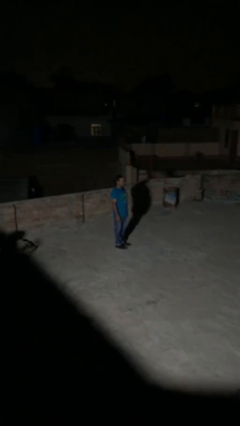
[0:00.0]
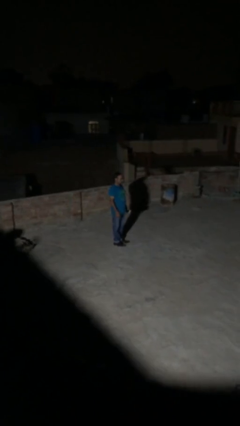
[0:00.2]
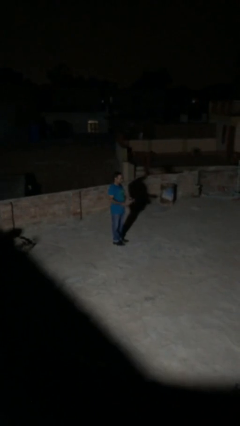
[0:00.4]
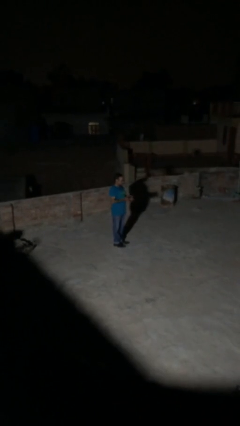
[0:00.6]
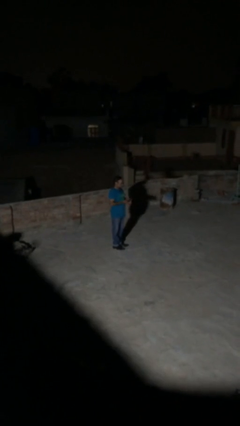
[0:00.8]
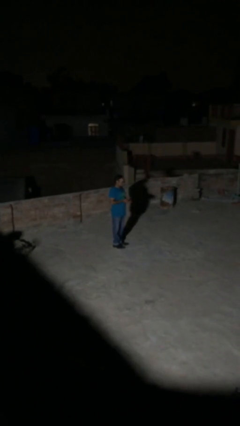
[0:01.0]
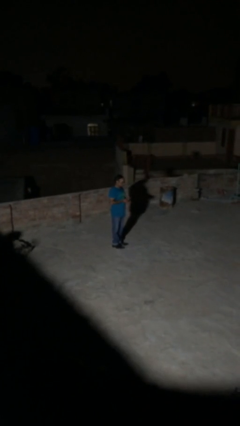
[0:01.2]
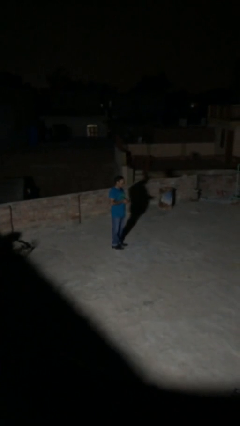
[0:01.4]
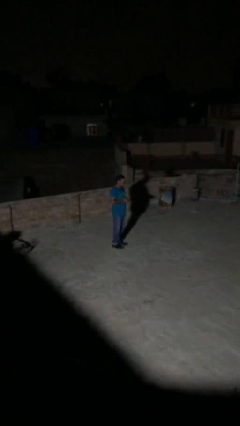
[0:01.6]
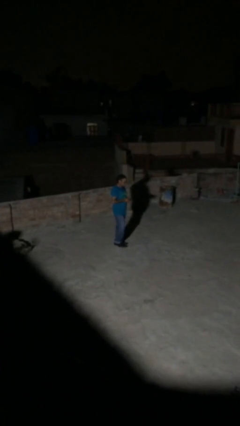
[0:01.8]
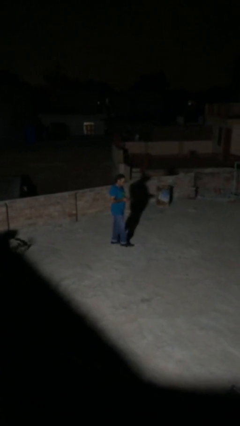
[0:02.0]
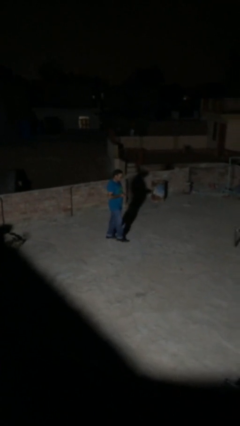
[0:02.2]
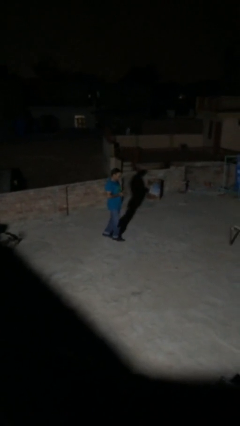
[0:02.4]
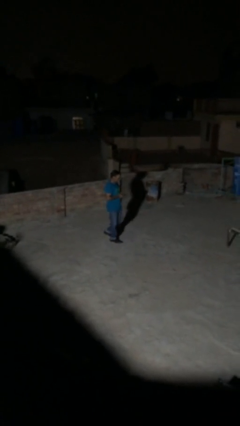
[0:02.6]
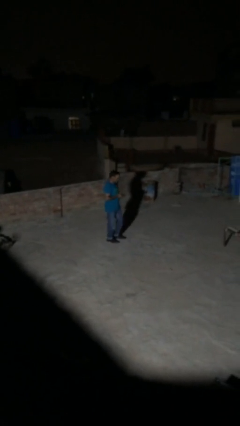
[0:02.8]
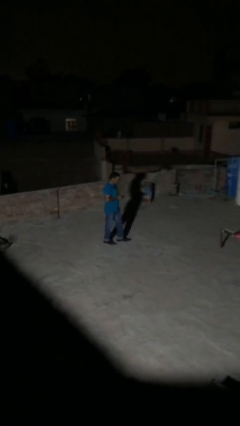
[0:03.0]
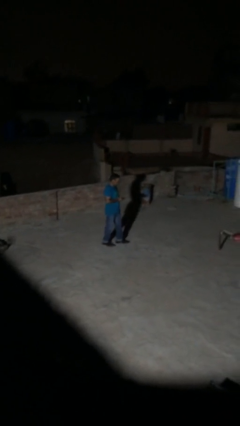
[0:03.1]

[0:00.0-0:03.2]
person texts on phone

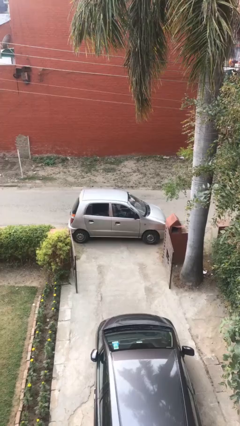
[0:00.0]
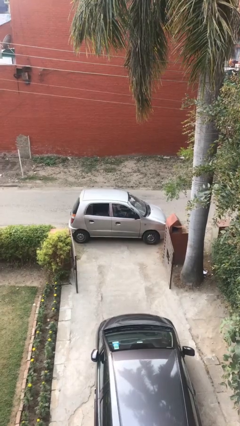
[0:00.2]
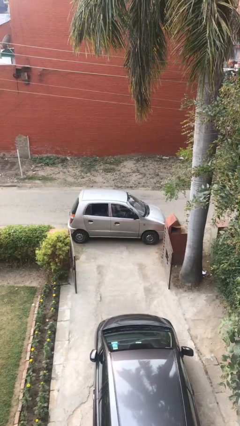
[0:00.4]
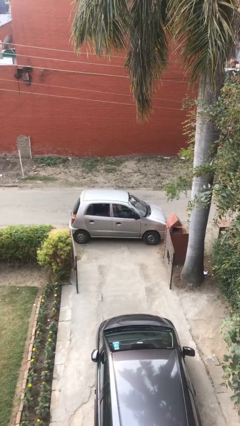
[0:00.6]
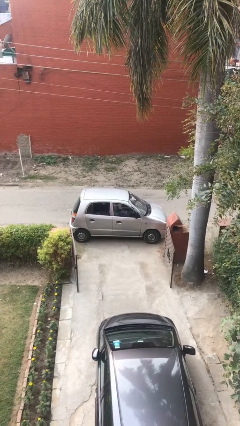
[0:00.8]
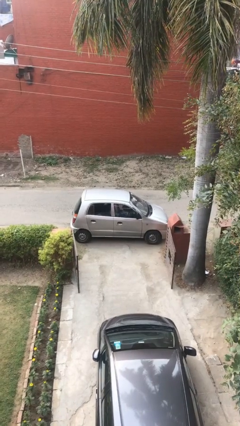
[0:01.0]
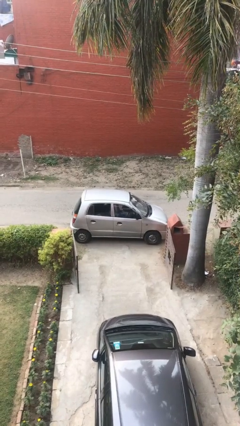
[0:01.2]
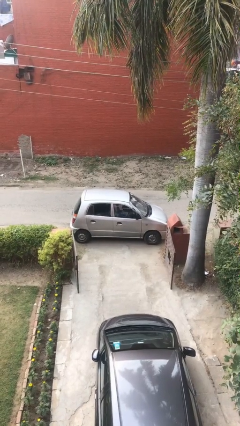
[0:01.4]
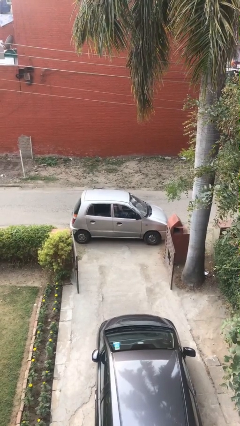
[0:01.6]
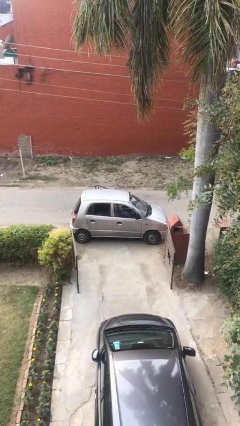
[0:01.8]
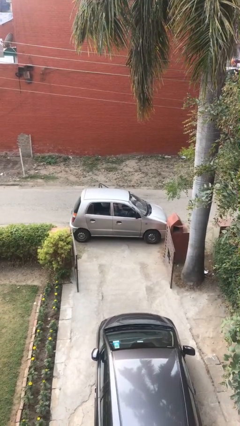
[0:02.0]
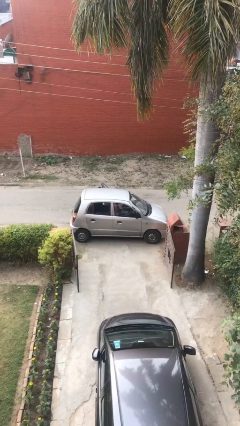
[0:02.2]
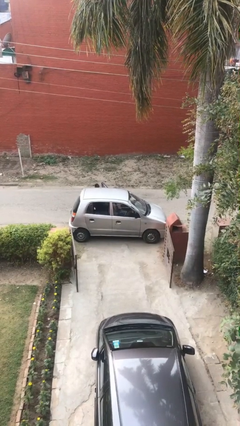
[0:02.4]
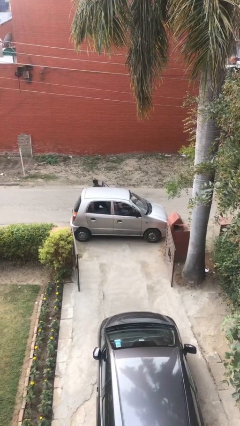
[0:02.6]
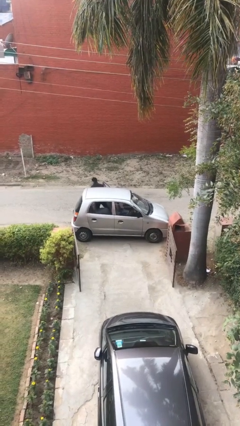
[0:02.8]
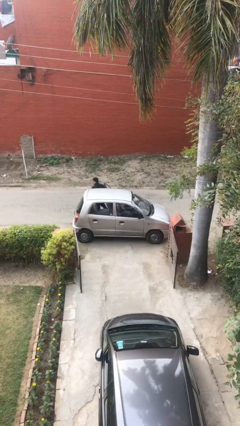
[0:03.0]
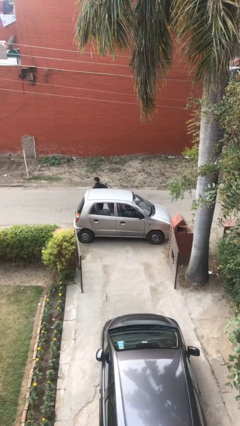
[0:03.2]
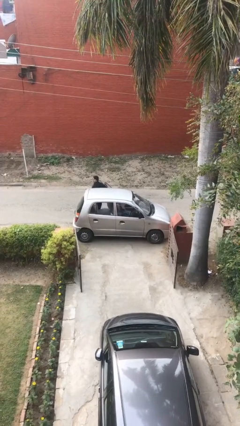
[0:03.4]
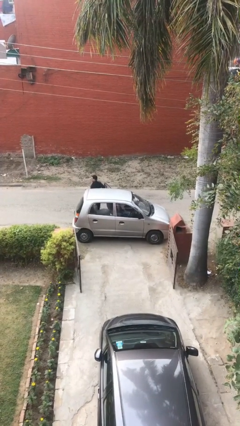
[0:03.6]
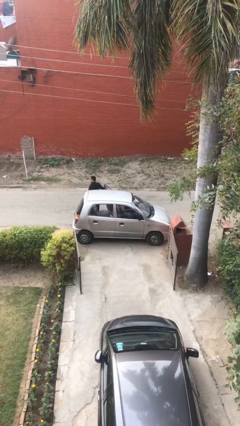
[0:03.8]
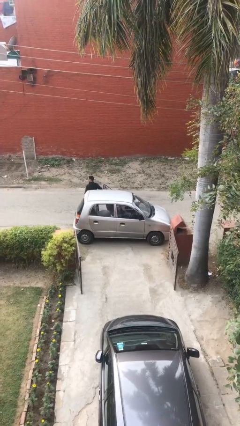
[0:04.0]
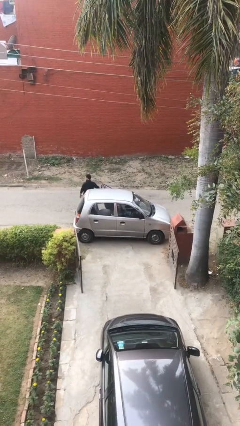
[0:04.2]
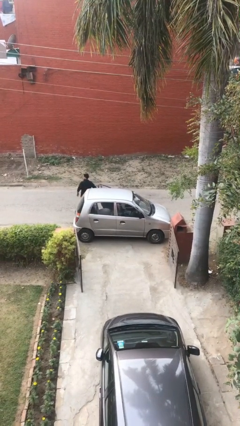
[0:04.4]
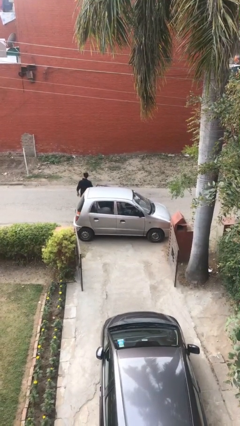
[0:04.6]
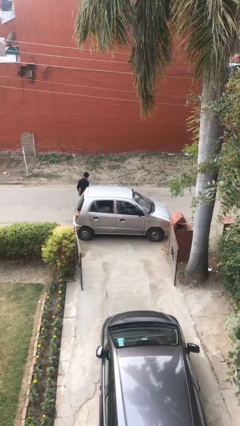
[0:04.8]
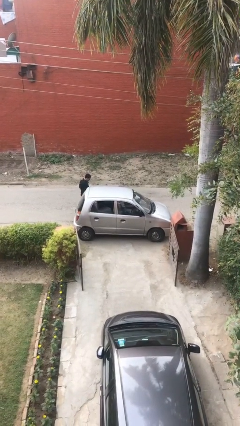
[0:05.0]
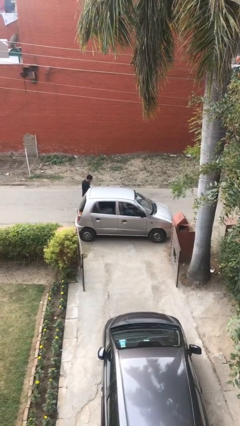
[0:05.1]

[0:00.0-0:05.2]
car drops off person

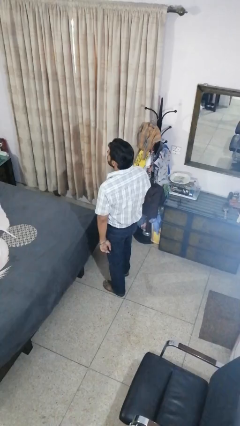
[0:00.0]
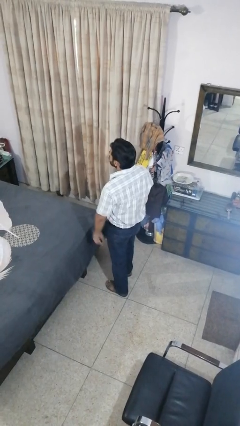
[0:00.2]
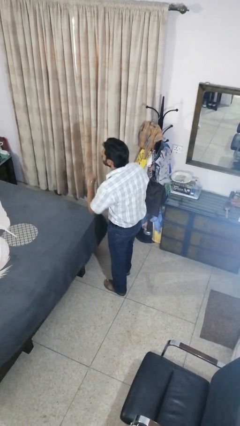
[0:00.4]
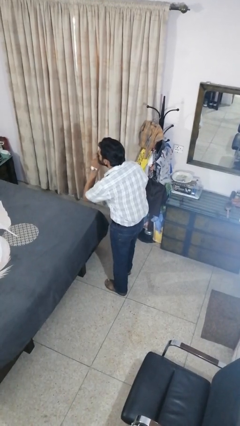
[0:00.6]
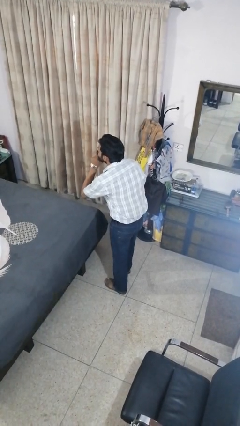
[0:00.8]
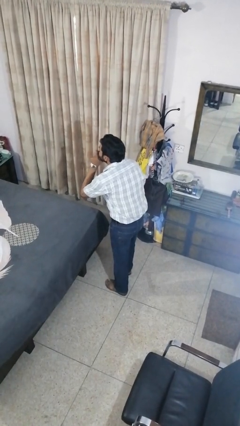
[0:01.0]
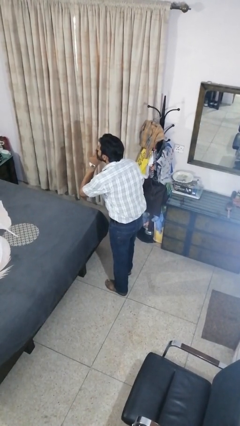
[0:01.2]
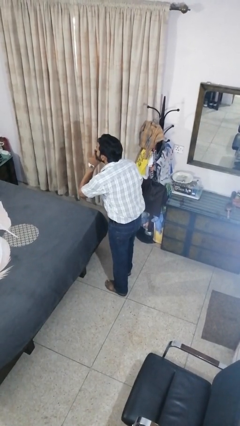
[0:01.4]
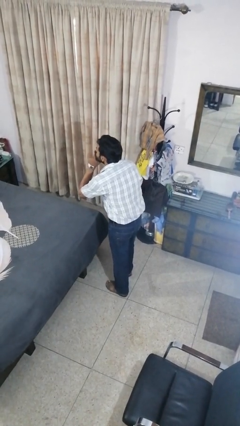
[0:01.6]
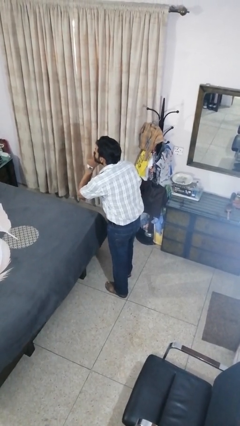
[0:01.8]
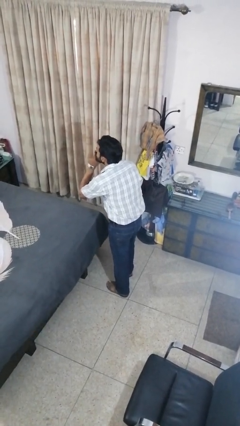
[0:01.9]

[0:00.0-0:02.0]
person gestures be quiet

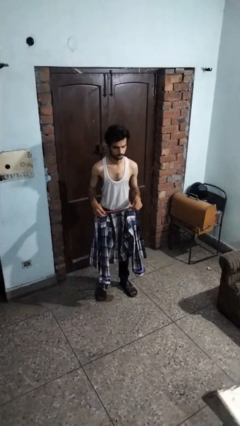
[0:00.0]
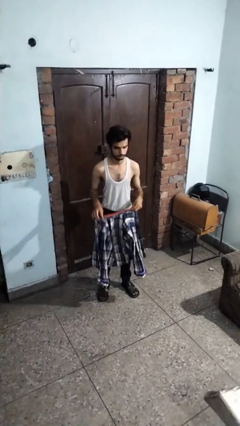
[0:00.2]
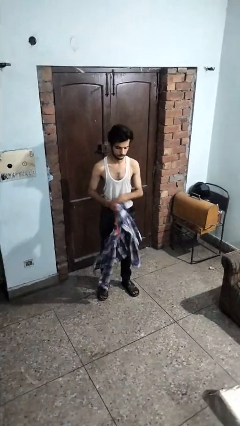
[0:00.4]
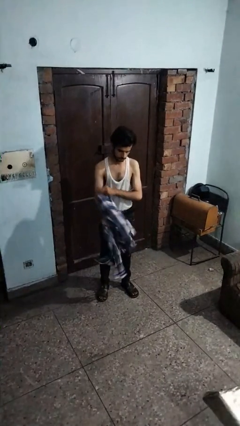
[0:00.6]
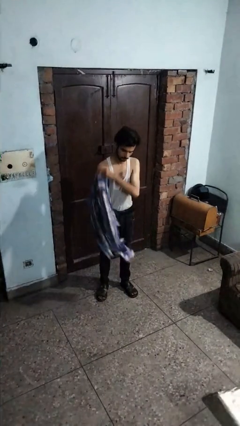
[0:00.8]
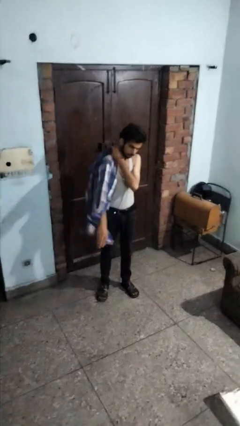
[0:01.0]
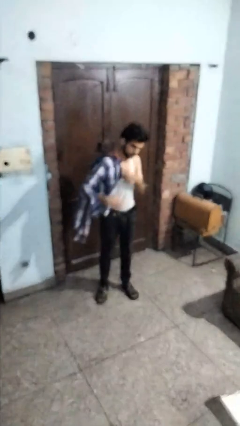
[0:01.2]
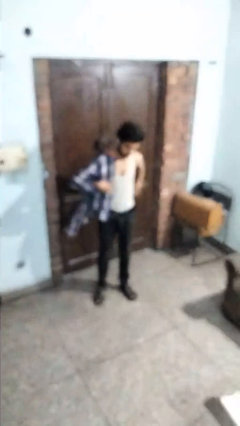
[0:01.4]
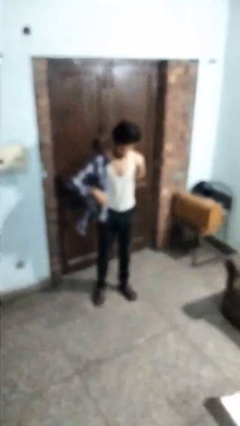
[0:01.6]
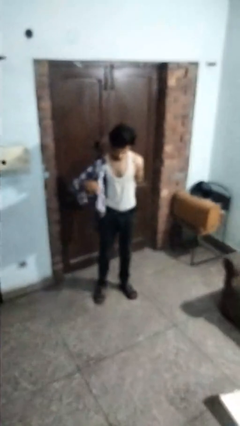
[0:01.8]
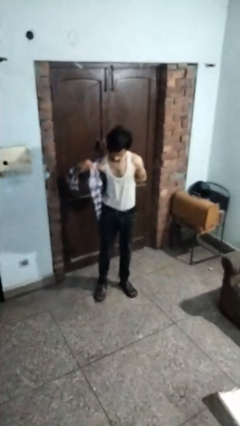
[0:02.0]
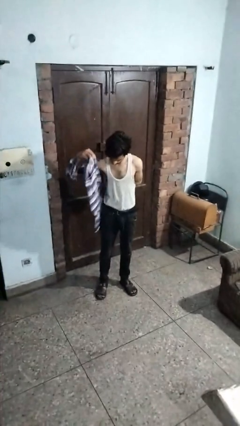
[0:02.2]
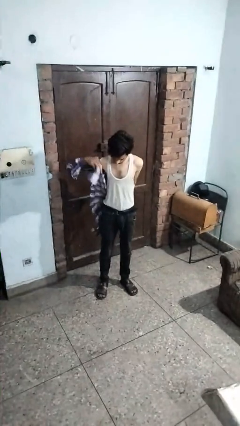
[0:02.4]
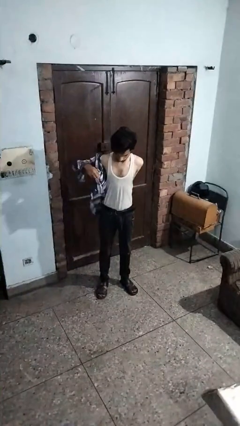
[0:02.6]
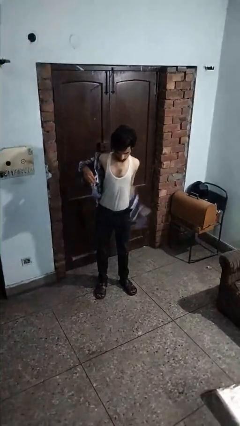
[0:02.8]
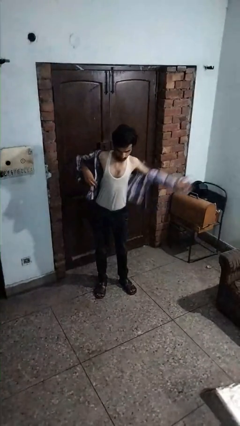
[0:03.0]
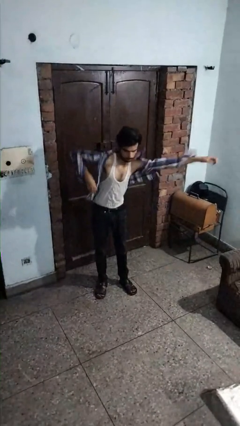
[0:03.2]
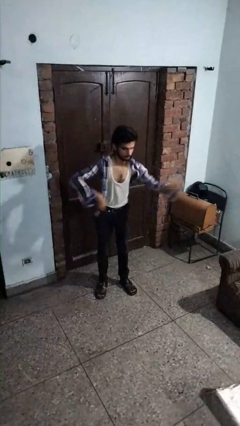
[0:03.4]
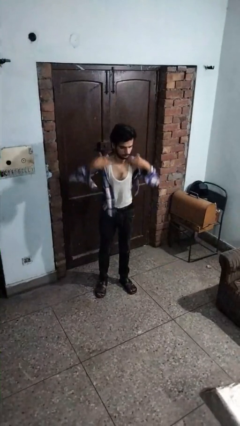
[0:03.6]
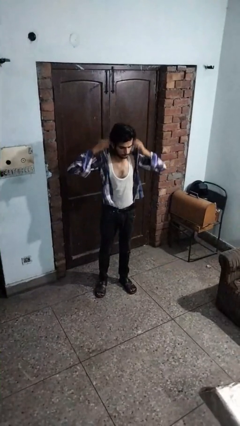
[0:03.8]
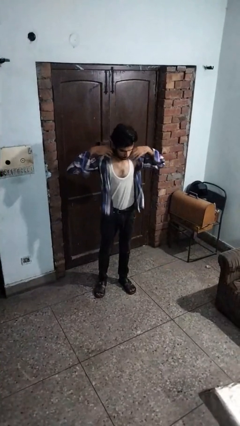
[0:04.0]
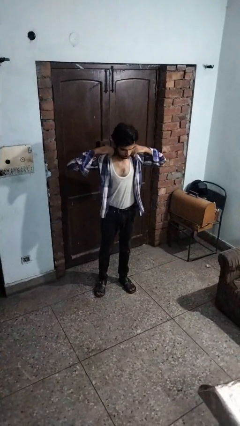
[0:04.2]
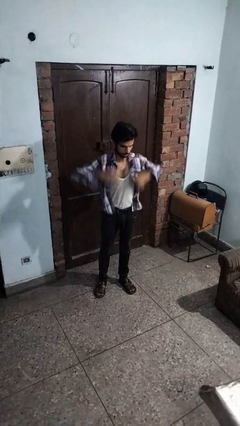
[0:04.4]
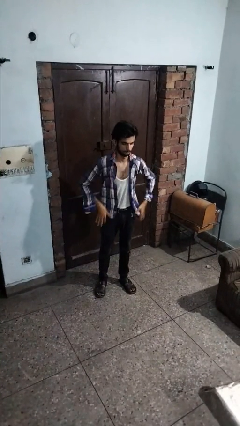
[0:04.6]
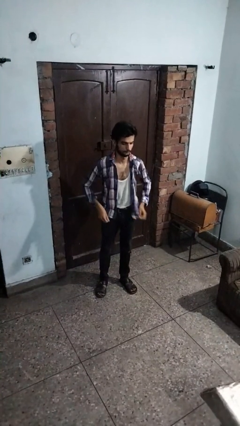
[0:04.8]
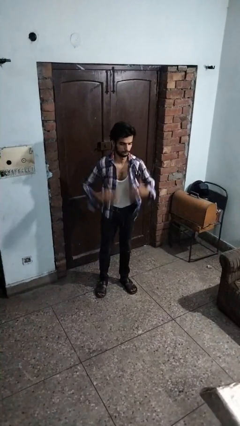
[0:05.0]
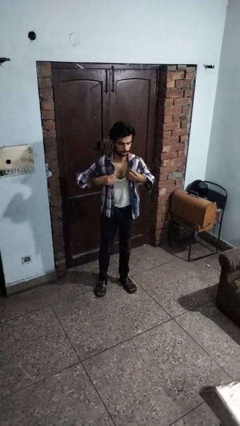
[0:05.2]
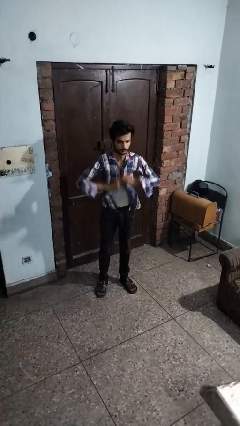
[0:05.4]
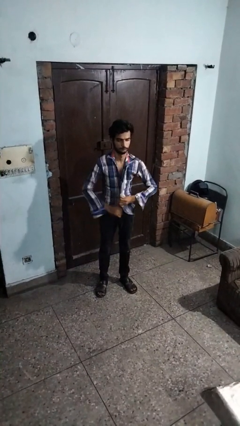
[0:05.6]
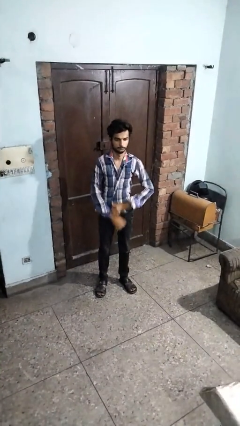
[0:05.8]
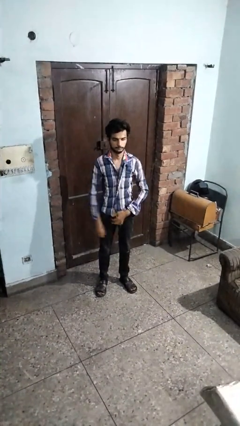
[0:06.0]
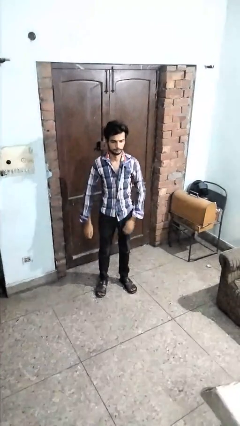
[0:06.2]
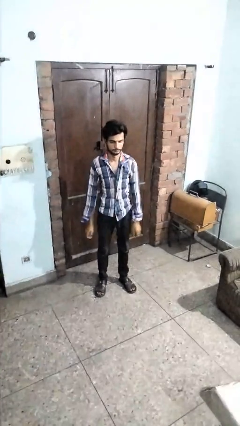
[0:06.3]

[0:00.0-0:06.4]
person puts on shirt

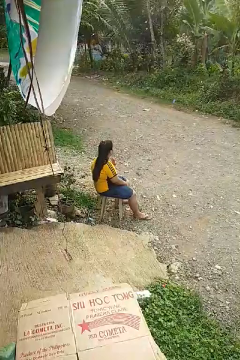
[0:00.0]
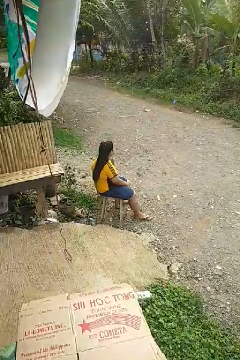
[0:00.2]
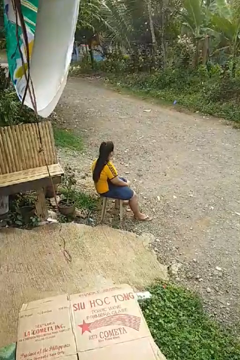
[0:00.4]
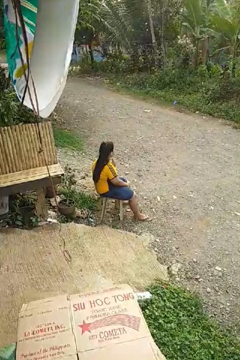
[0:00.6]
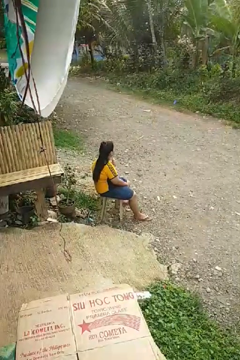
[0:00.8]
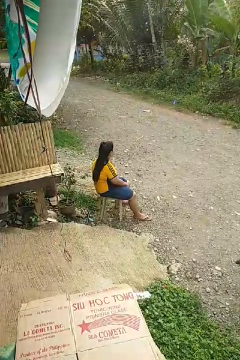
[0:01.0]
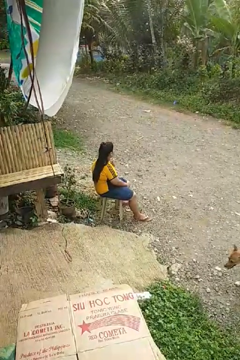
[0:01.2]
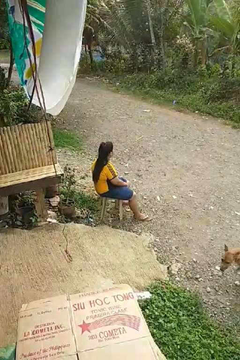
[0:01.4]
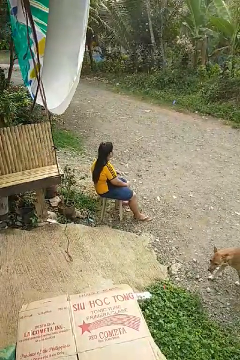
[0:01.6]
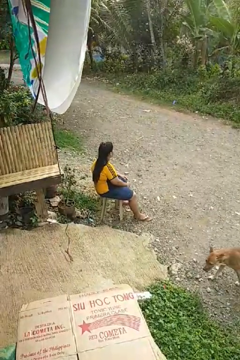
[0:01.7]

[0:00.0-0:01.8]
person drums on chest
